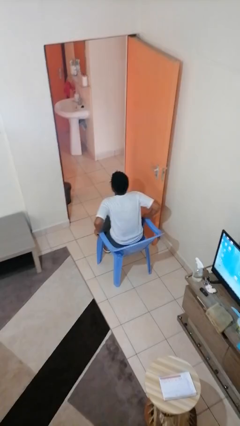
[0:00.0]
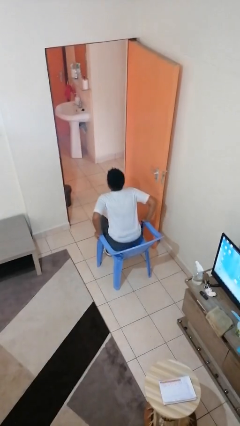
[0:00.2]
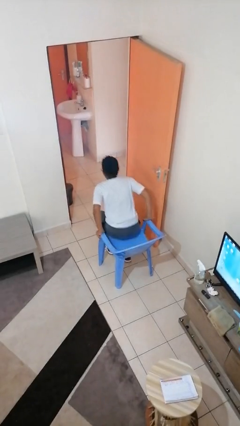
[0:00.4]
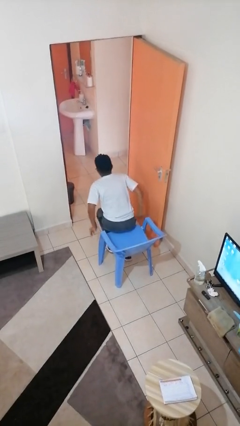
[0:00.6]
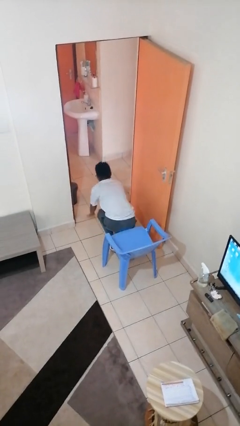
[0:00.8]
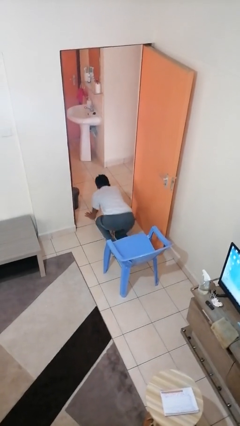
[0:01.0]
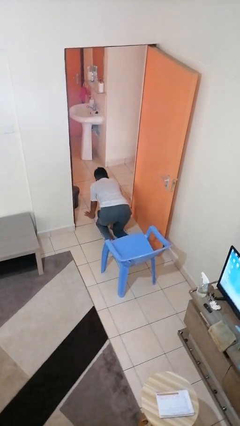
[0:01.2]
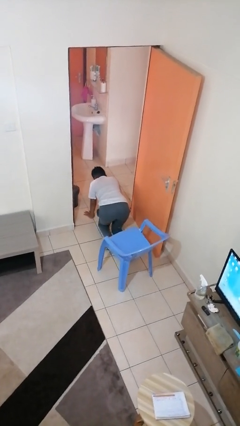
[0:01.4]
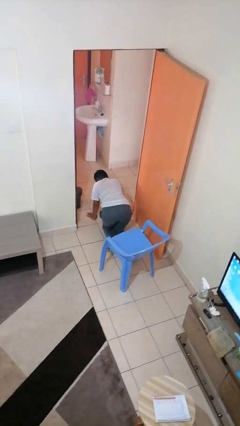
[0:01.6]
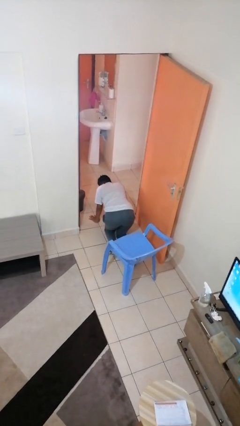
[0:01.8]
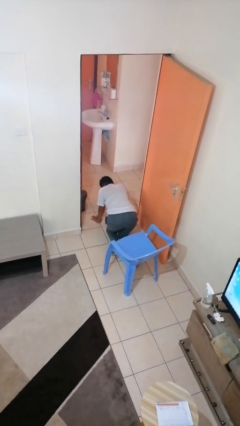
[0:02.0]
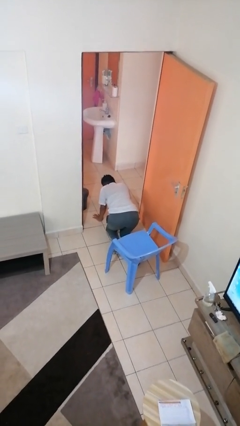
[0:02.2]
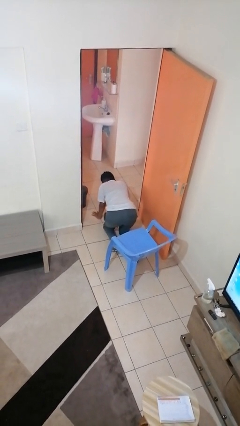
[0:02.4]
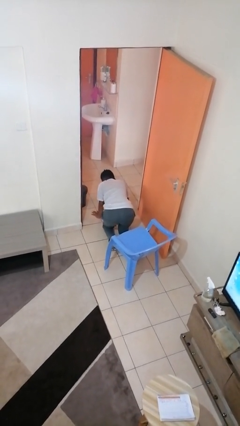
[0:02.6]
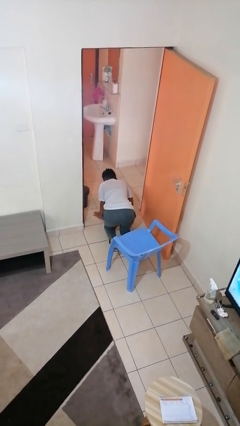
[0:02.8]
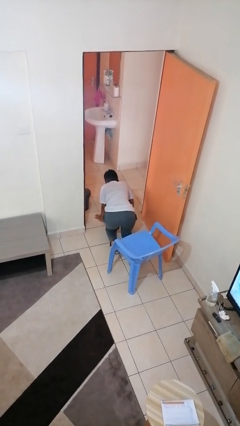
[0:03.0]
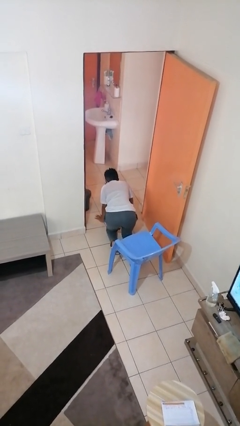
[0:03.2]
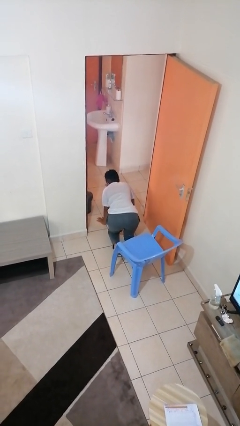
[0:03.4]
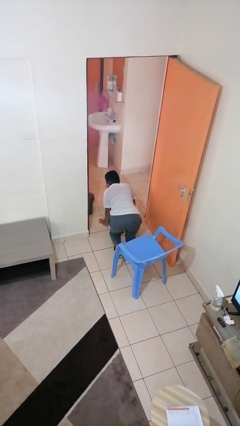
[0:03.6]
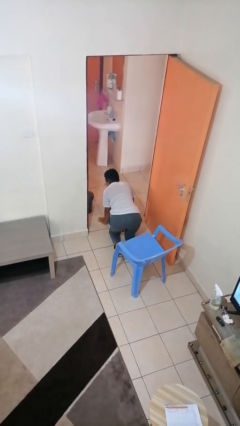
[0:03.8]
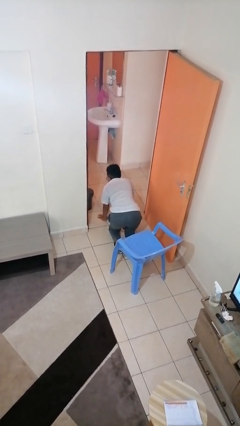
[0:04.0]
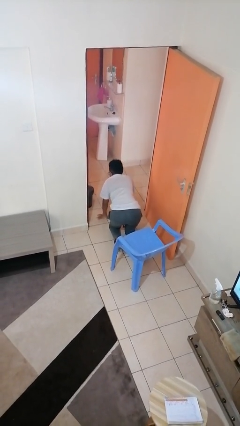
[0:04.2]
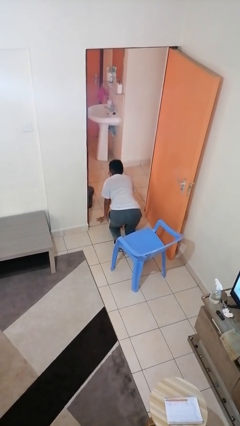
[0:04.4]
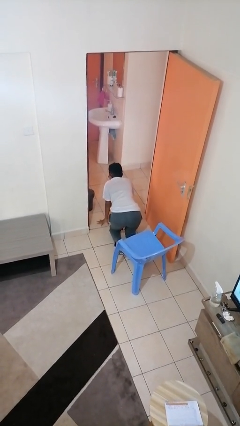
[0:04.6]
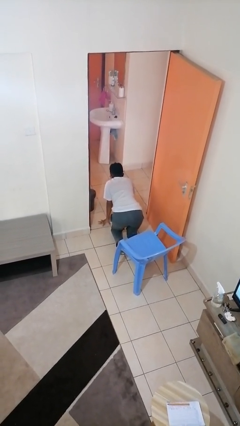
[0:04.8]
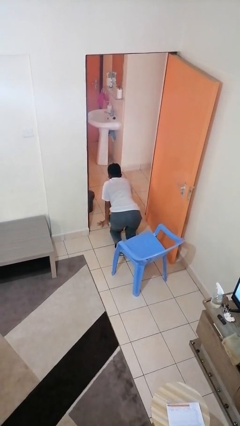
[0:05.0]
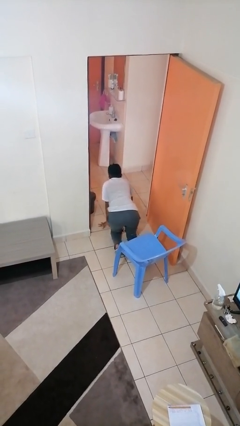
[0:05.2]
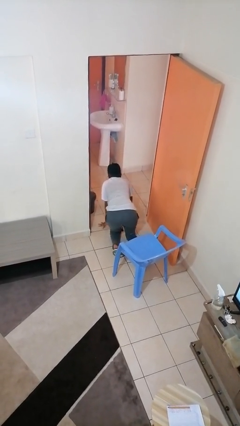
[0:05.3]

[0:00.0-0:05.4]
person falls from chair

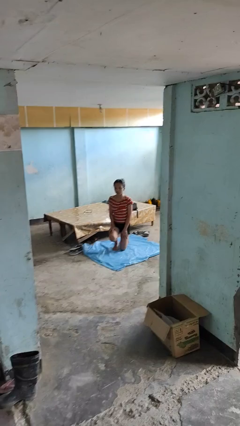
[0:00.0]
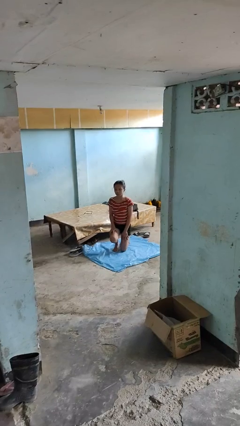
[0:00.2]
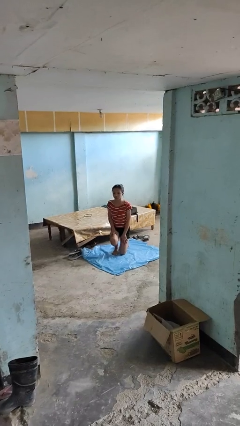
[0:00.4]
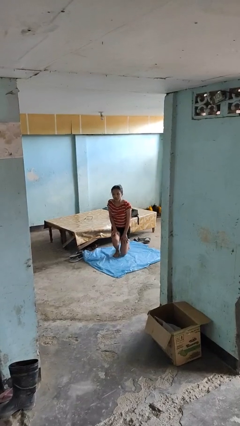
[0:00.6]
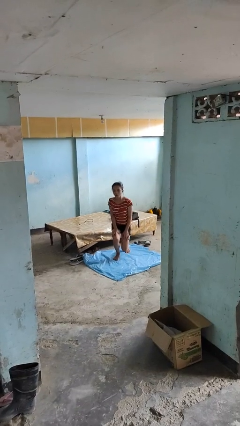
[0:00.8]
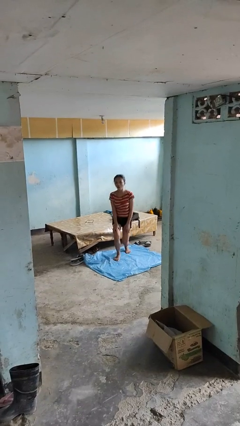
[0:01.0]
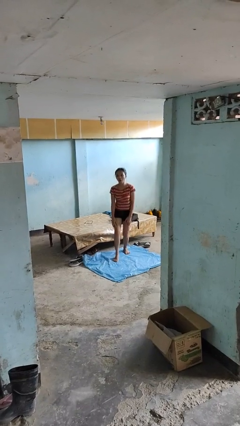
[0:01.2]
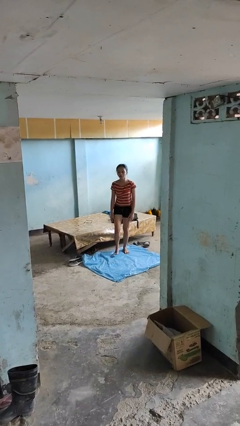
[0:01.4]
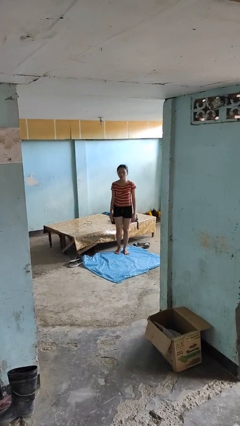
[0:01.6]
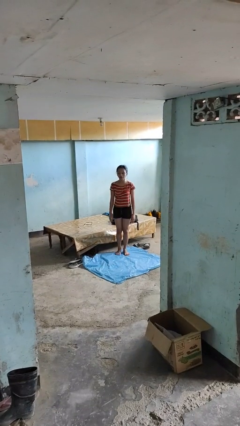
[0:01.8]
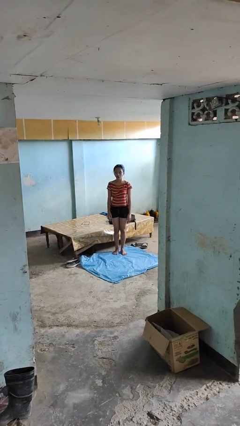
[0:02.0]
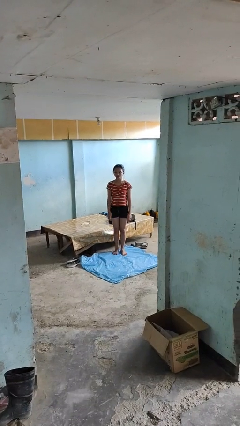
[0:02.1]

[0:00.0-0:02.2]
person stands up from floor

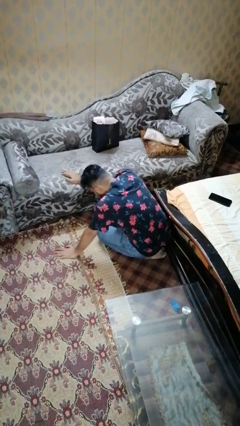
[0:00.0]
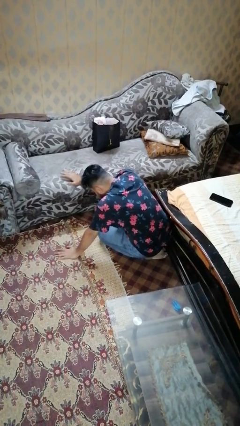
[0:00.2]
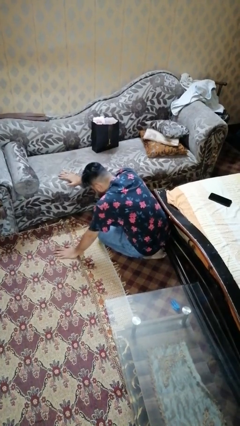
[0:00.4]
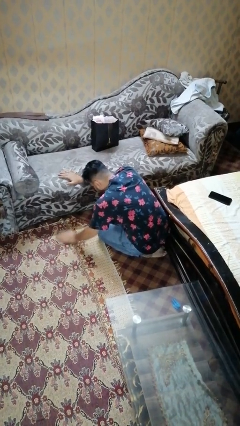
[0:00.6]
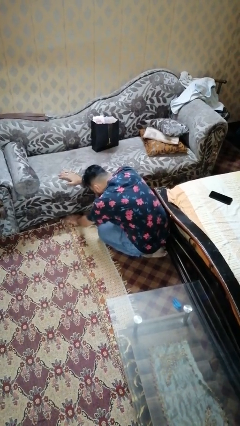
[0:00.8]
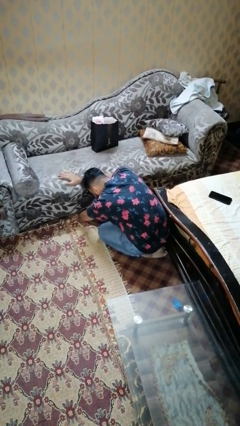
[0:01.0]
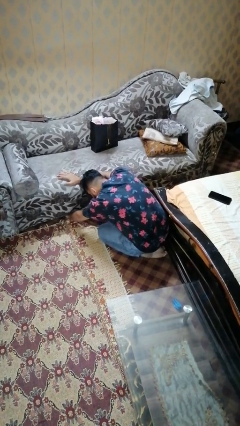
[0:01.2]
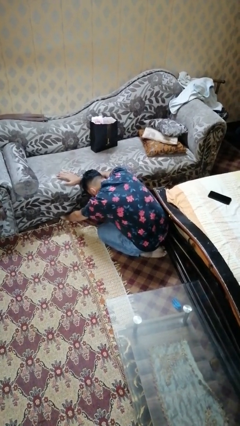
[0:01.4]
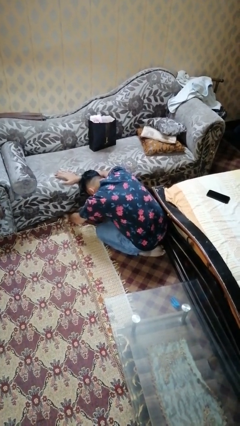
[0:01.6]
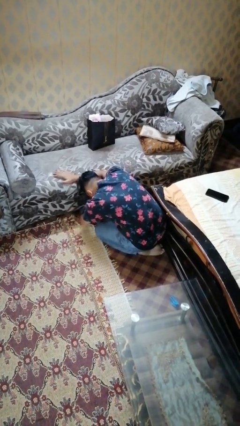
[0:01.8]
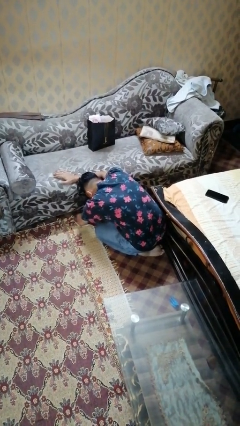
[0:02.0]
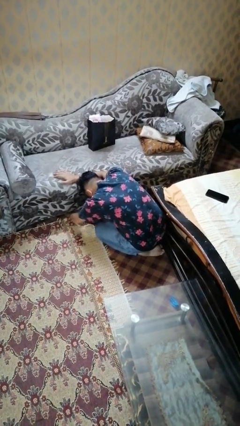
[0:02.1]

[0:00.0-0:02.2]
person searches under couch

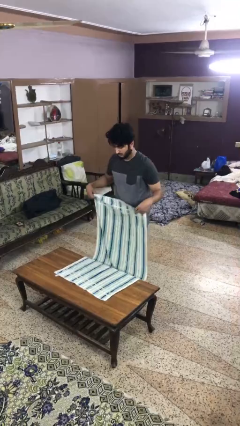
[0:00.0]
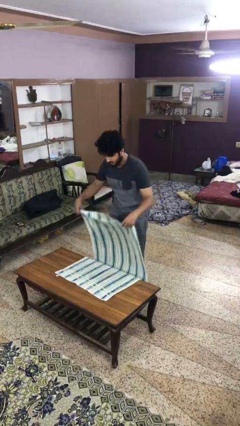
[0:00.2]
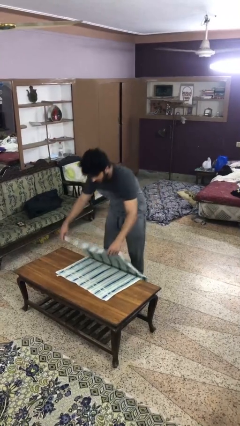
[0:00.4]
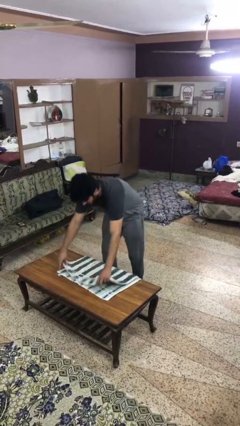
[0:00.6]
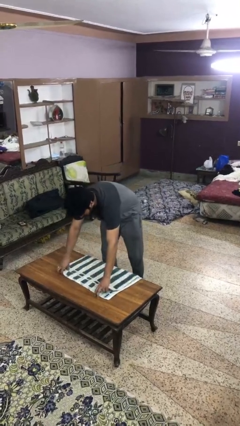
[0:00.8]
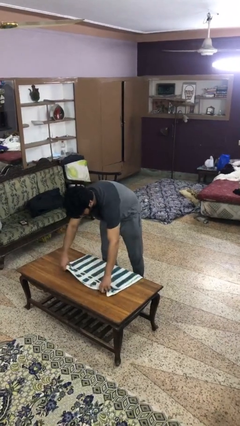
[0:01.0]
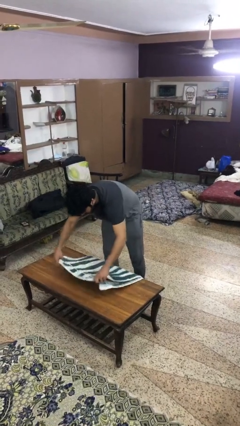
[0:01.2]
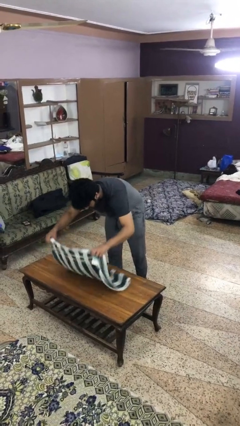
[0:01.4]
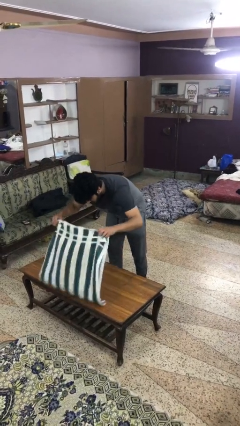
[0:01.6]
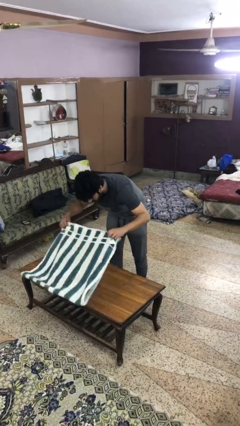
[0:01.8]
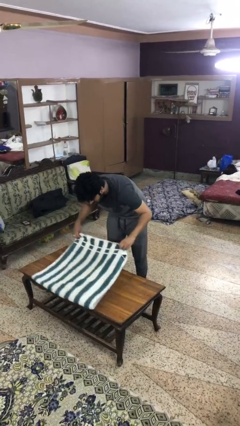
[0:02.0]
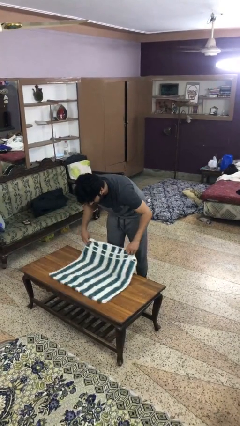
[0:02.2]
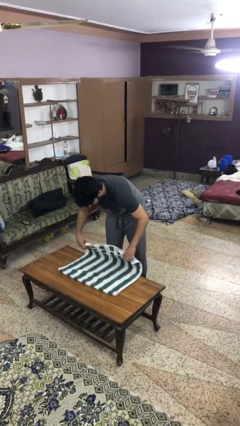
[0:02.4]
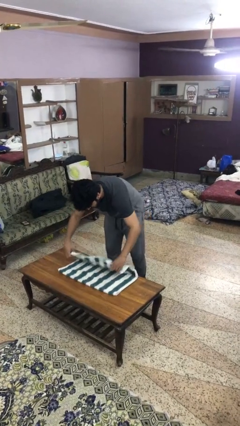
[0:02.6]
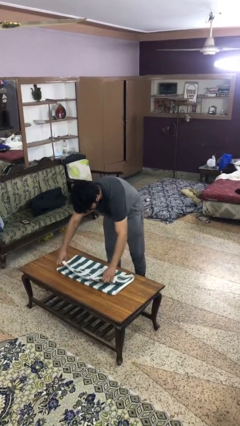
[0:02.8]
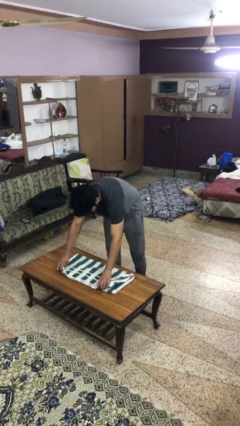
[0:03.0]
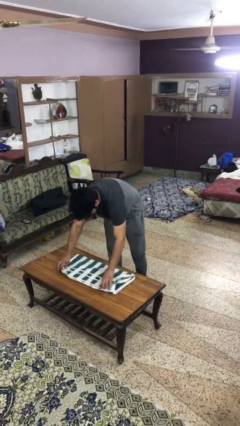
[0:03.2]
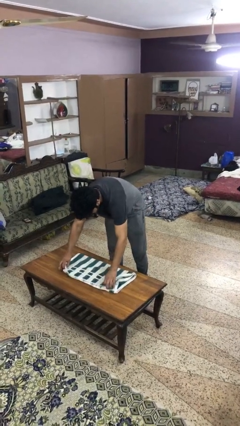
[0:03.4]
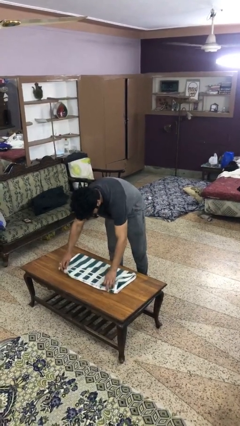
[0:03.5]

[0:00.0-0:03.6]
person folds towel

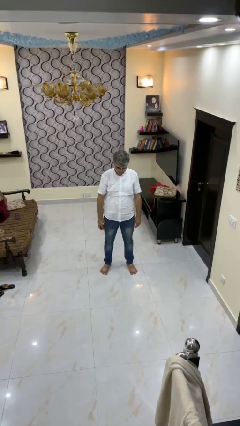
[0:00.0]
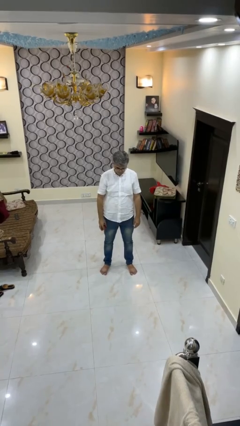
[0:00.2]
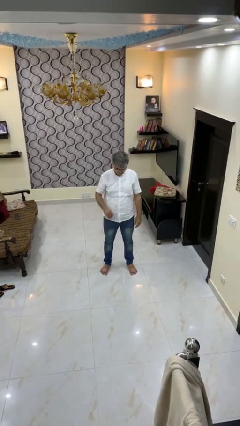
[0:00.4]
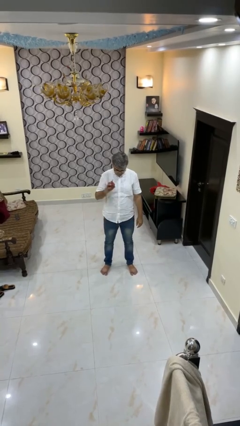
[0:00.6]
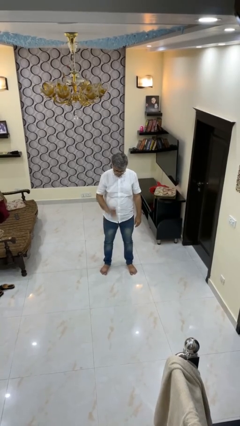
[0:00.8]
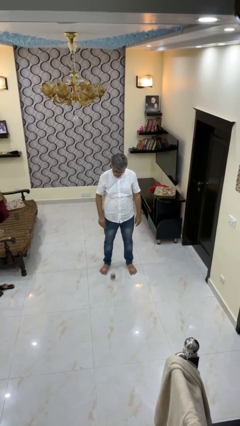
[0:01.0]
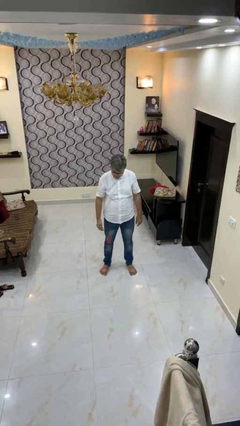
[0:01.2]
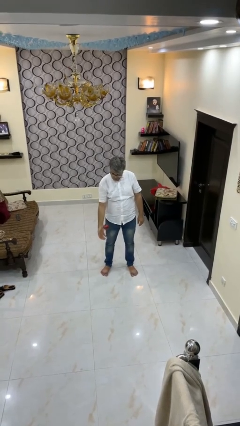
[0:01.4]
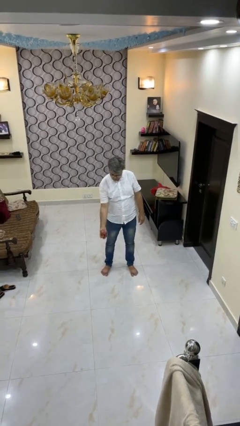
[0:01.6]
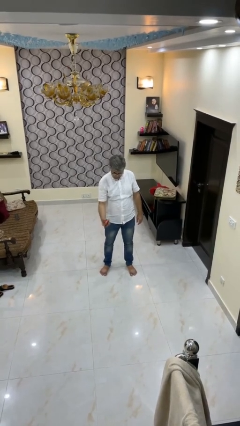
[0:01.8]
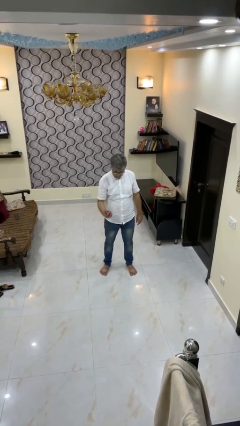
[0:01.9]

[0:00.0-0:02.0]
person bounces ball on floor

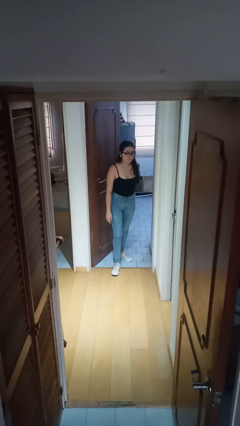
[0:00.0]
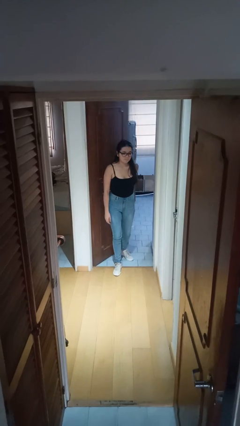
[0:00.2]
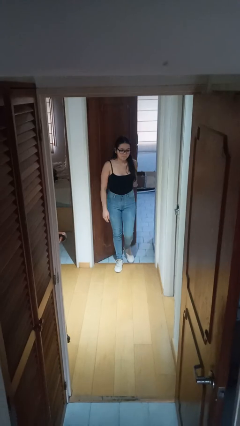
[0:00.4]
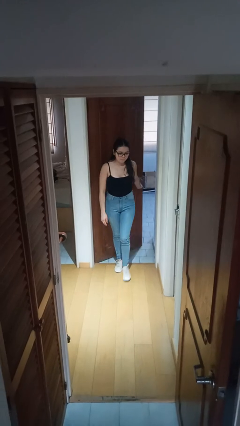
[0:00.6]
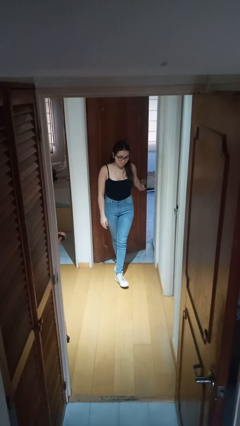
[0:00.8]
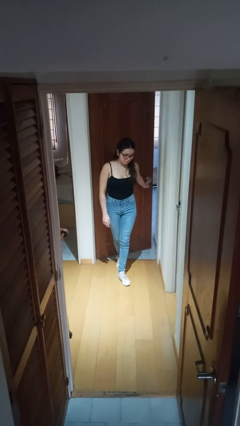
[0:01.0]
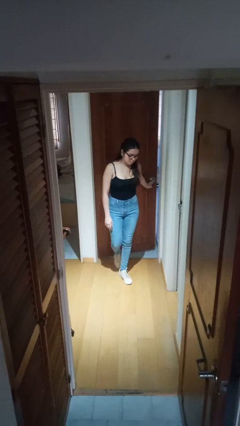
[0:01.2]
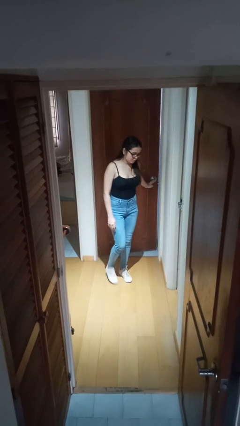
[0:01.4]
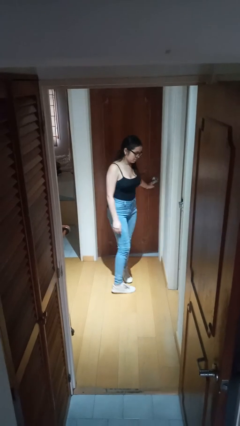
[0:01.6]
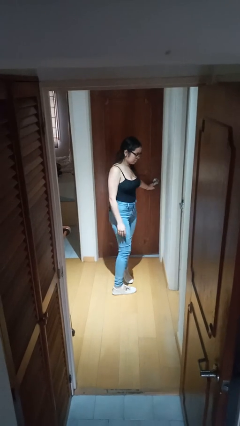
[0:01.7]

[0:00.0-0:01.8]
person closes facility door

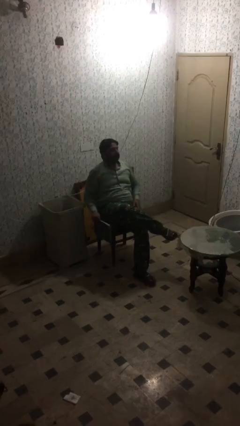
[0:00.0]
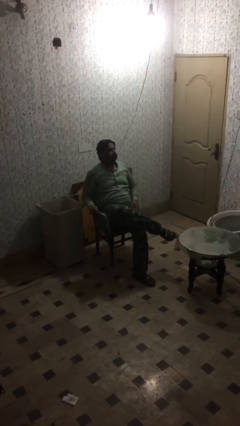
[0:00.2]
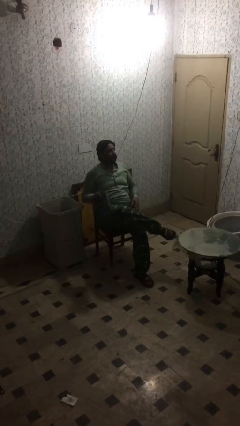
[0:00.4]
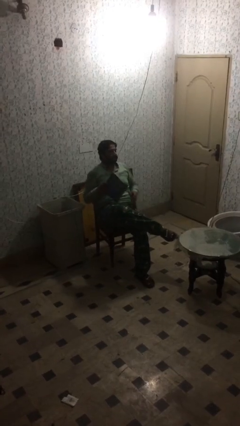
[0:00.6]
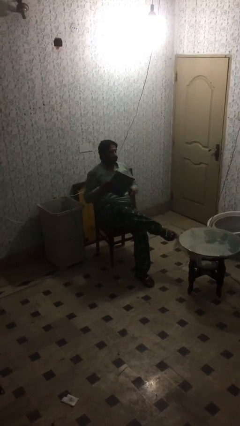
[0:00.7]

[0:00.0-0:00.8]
person reads document
